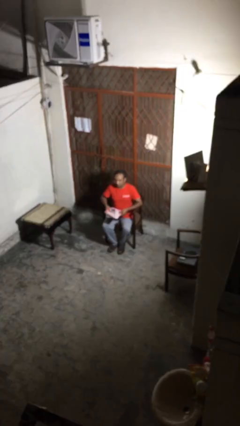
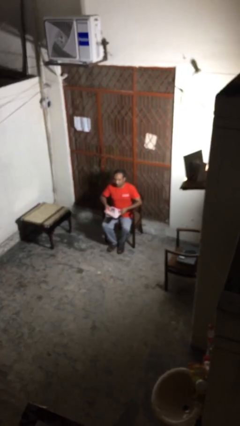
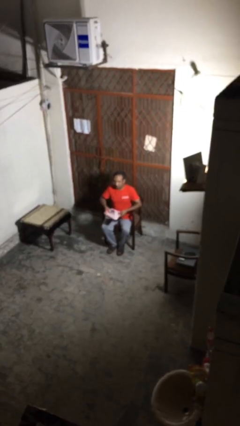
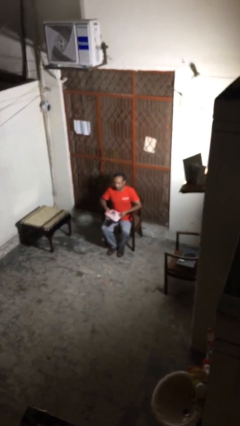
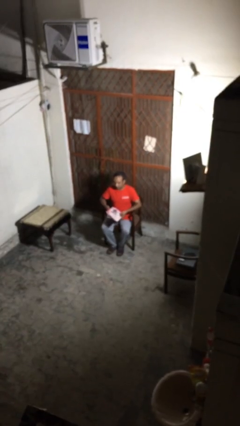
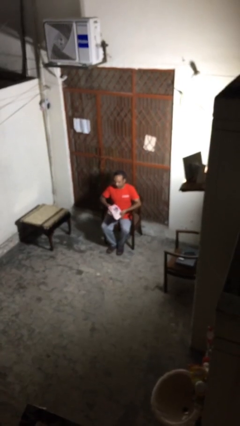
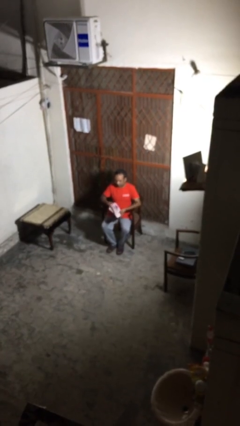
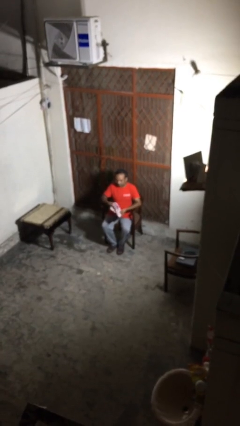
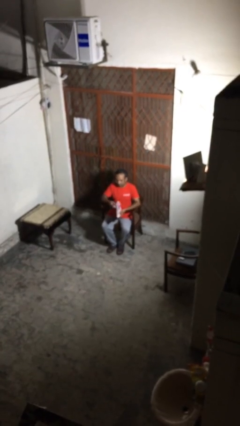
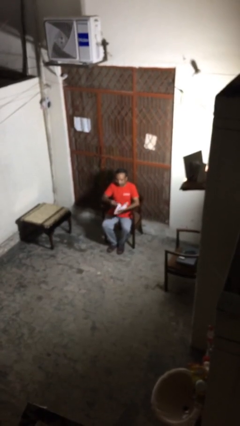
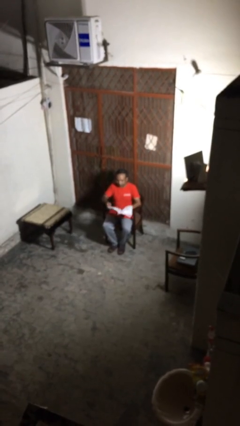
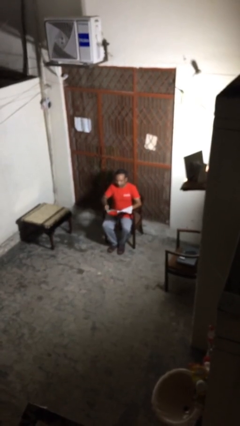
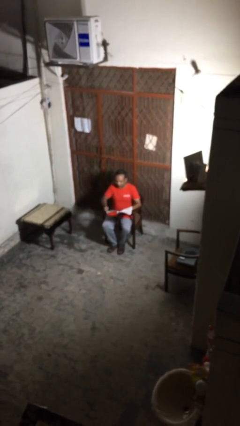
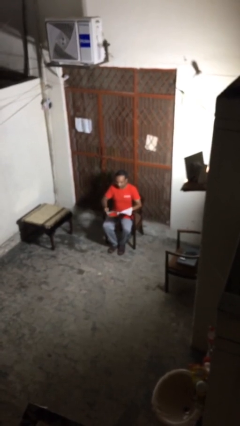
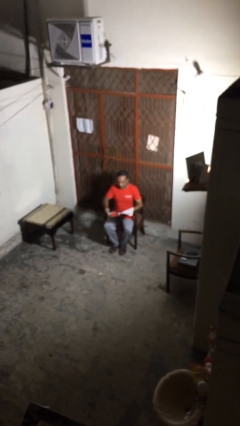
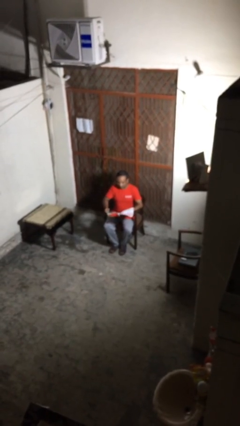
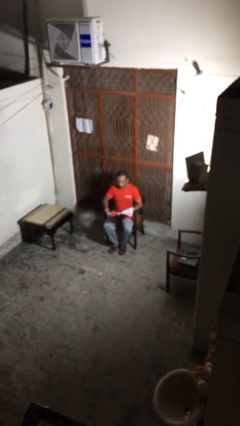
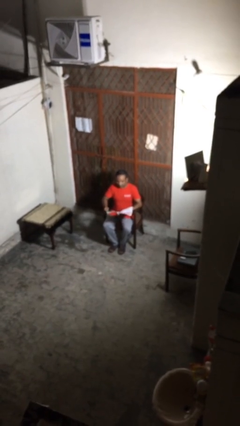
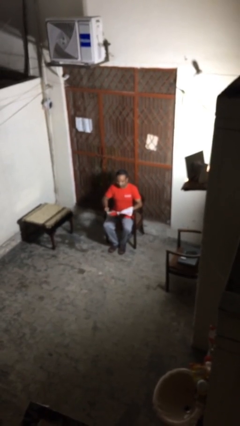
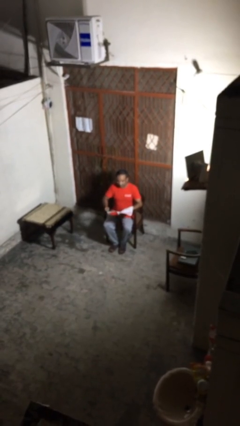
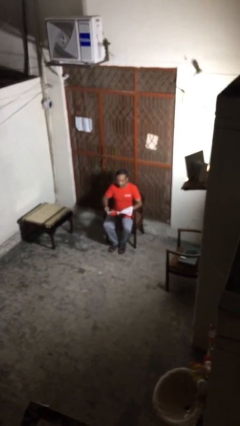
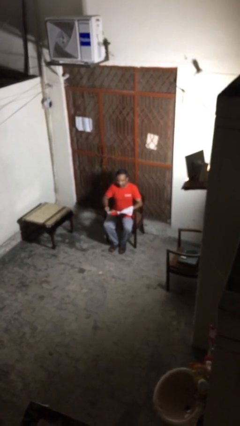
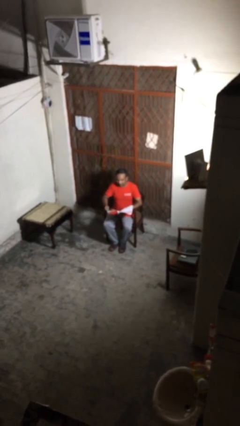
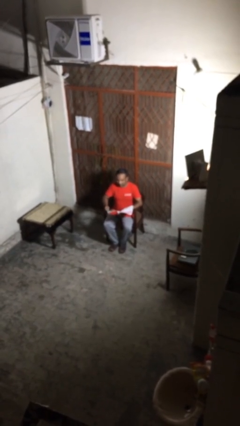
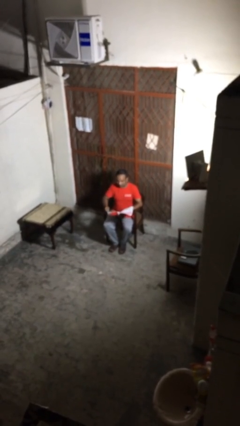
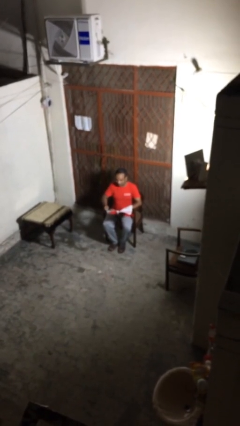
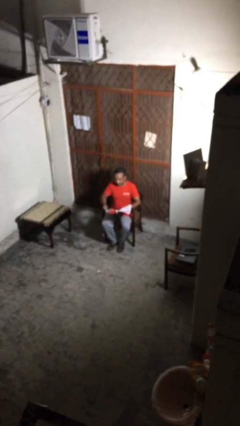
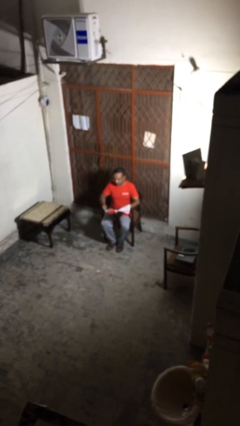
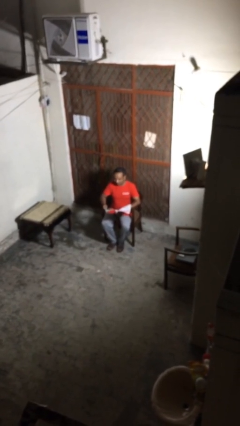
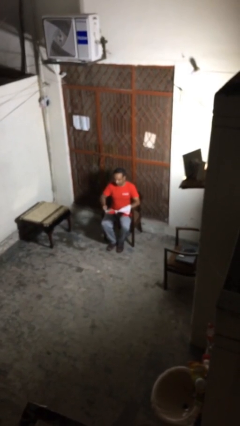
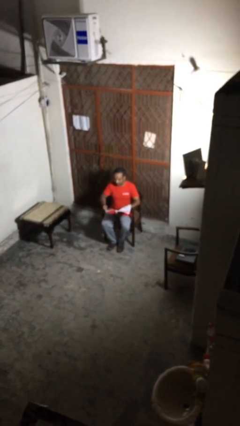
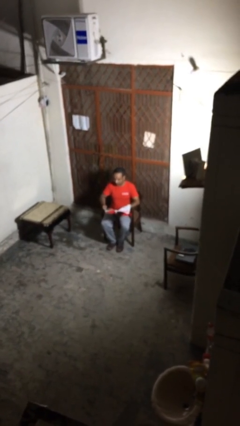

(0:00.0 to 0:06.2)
person reads document

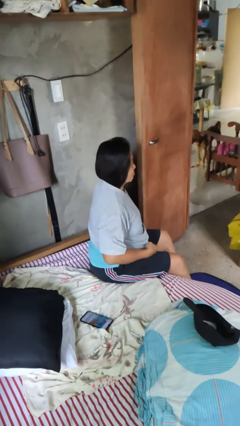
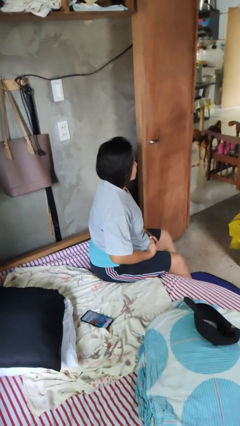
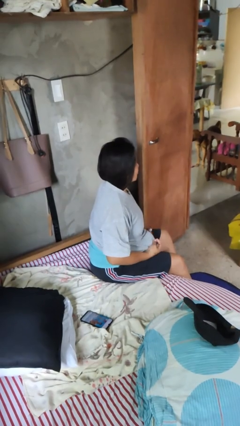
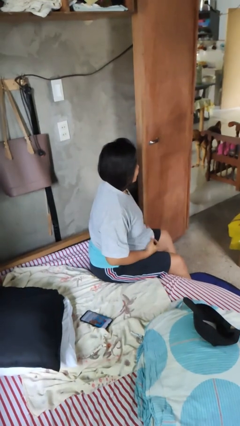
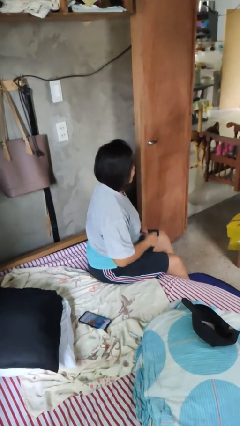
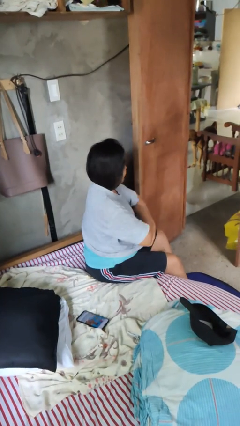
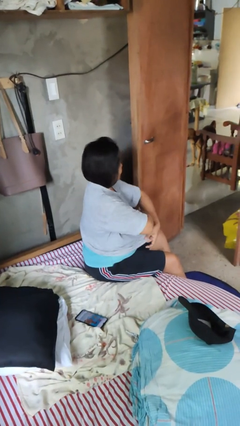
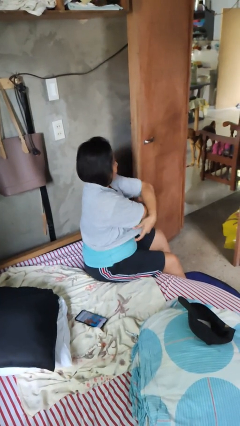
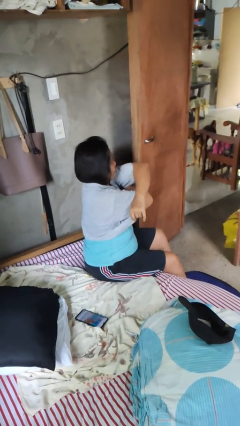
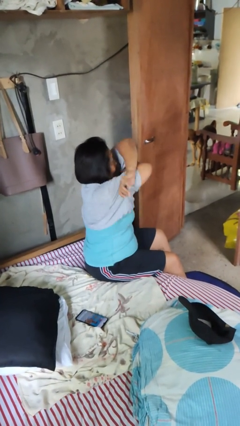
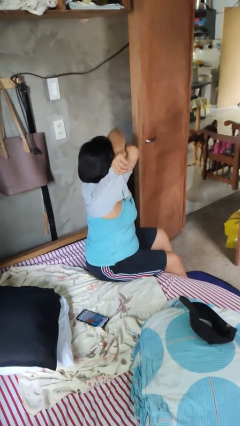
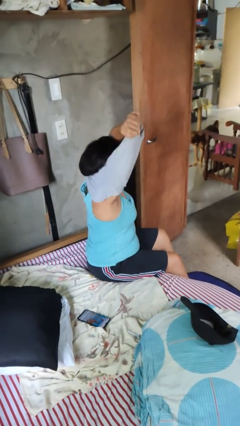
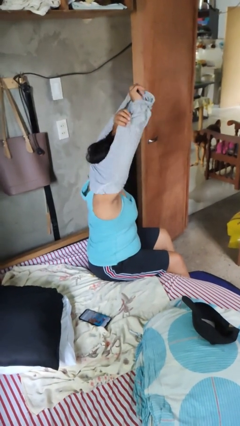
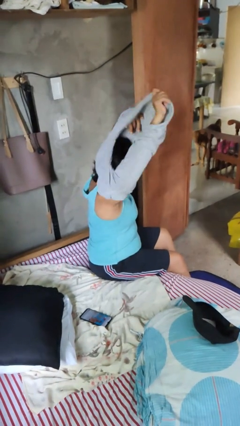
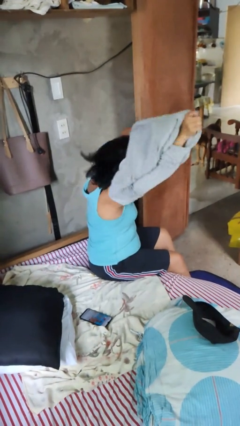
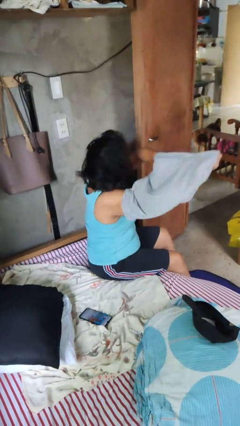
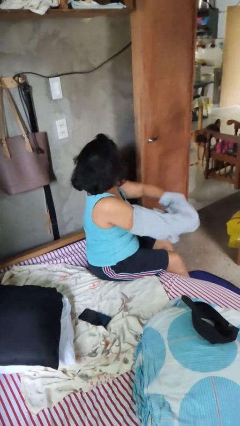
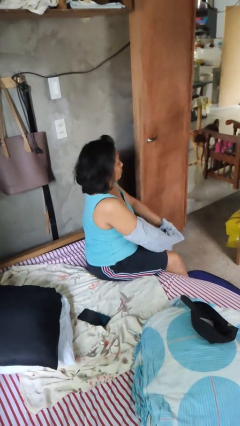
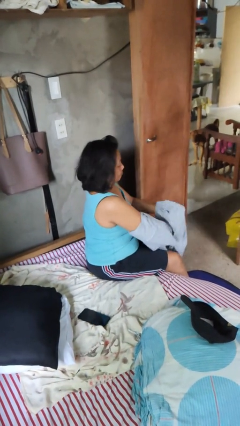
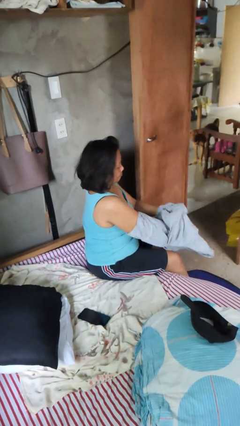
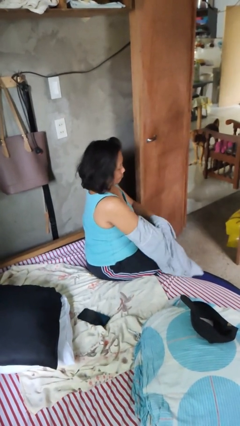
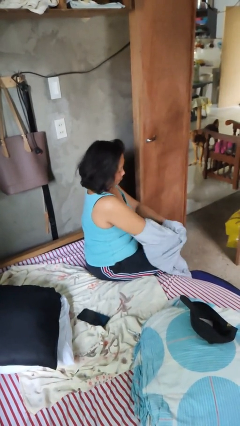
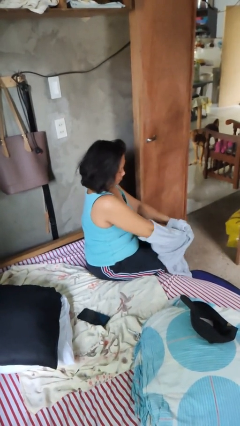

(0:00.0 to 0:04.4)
person takes off shirt

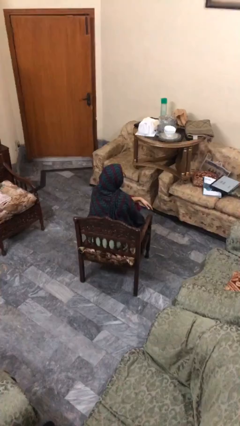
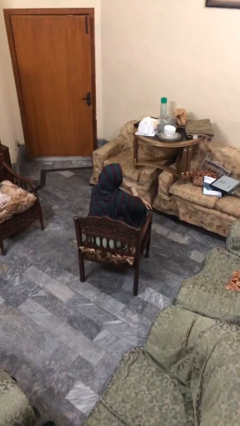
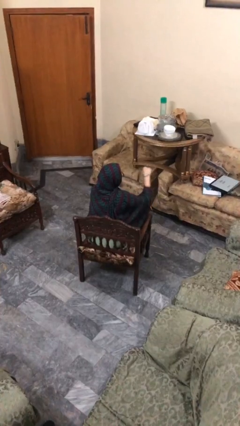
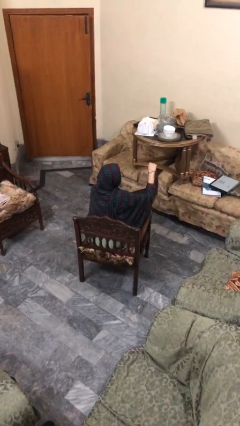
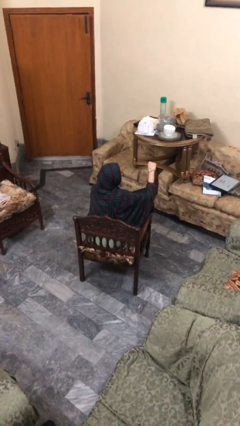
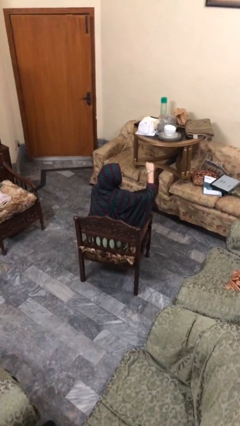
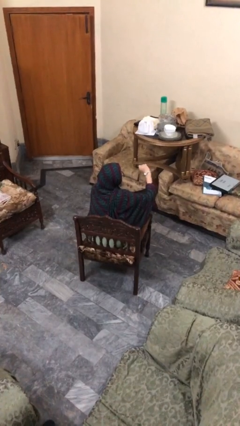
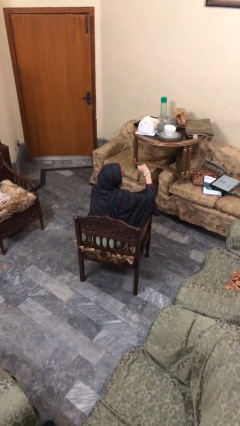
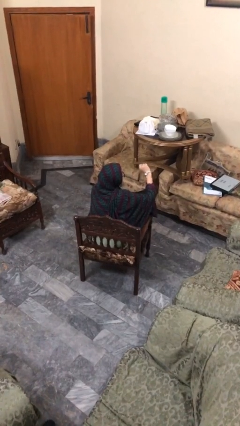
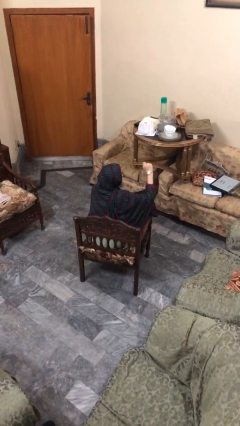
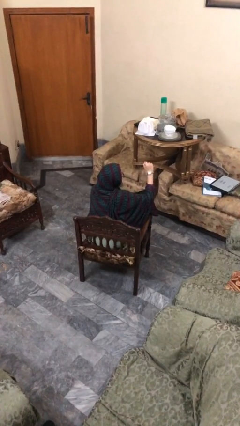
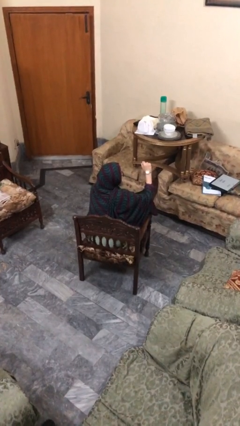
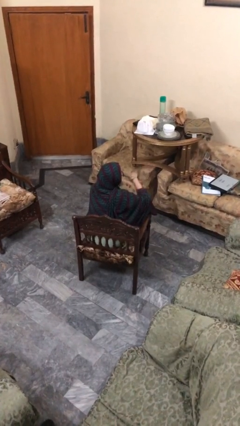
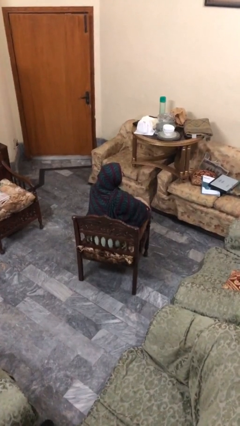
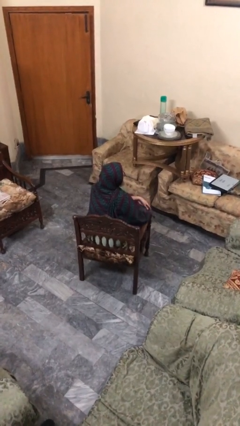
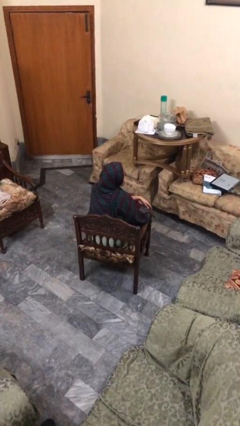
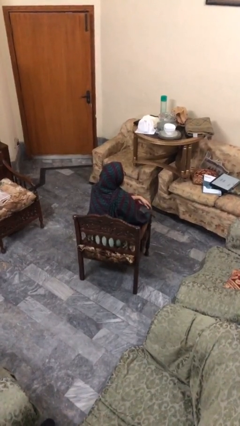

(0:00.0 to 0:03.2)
person looks at wristwatch

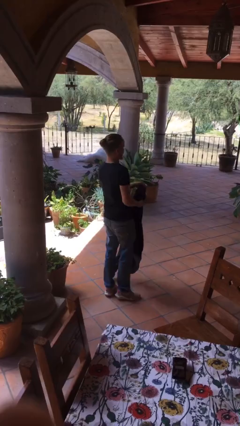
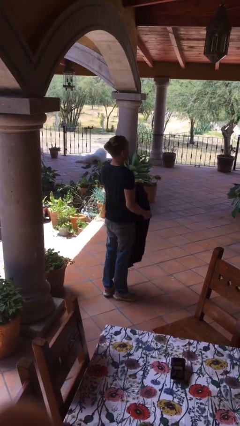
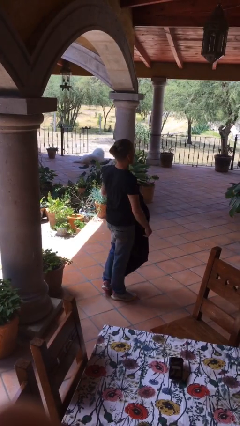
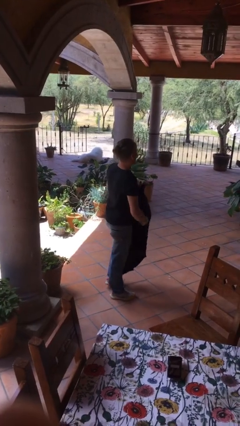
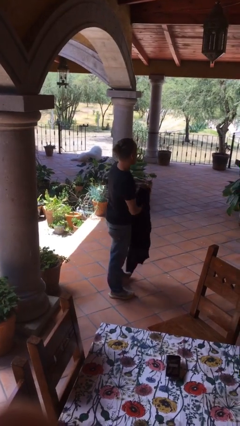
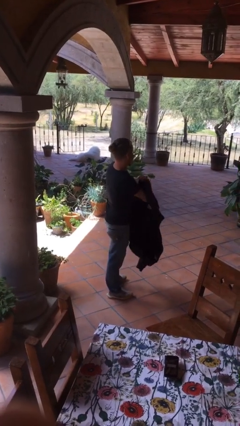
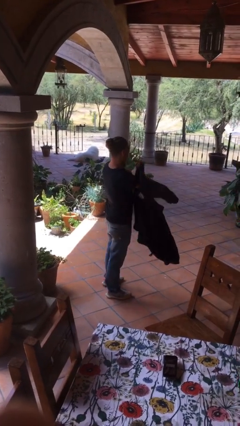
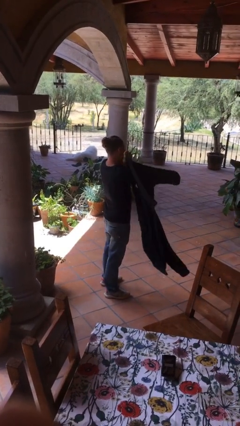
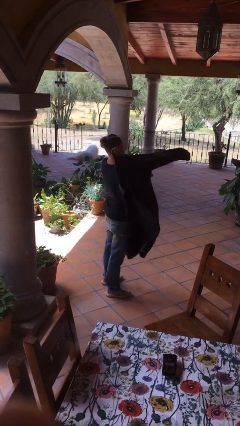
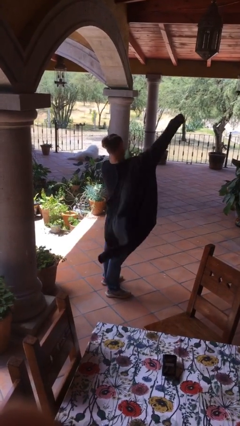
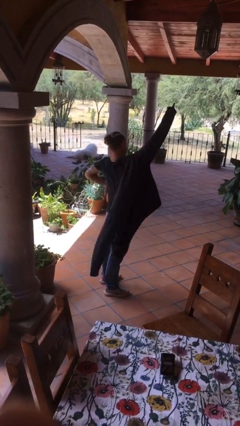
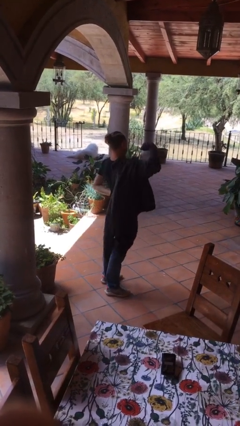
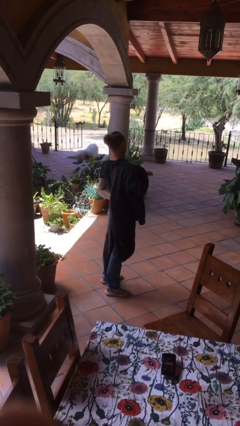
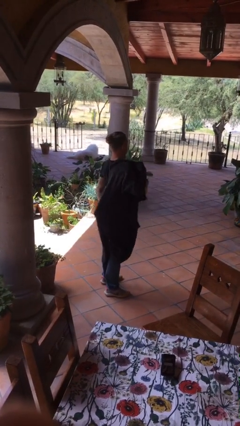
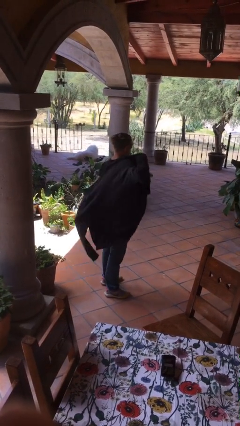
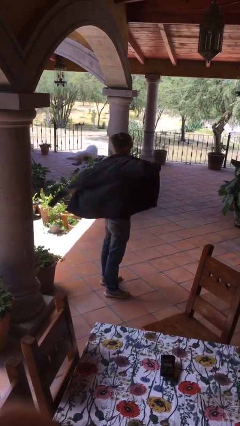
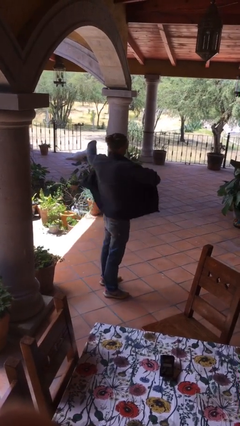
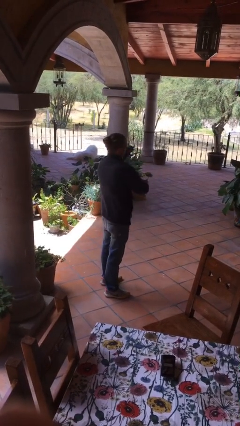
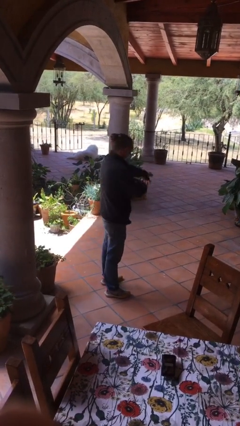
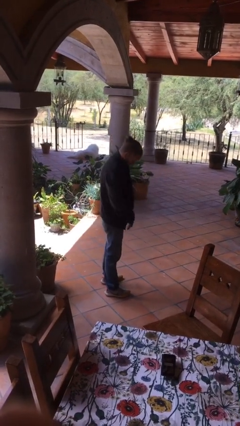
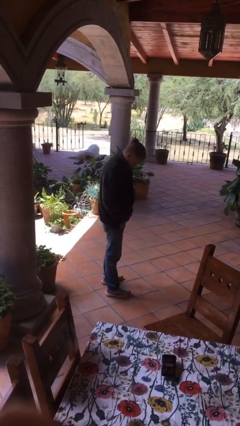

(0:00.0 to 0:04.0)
person puts on jacket

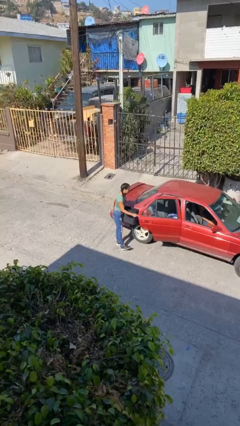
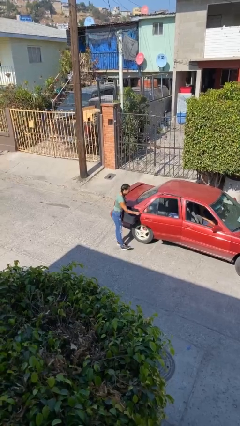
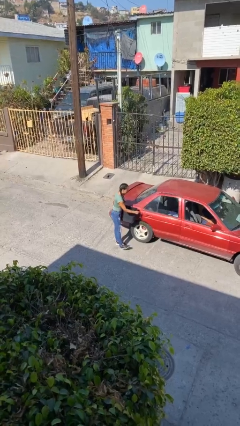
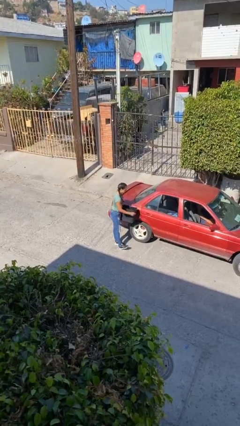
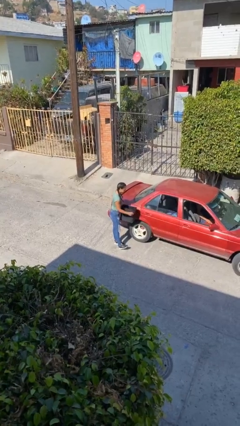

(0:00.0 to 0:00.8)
person closes car door
